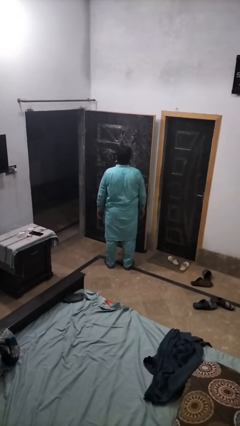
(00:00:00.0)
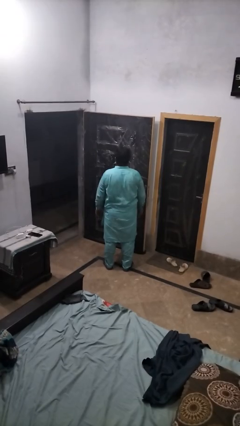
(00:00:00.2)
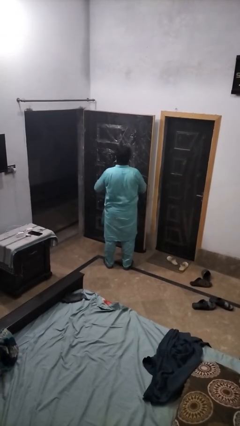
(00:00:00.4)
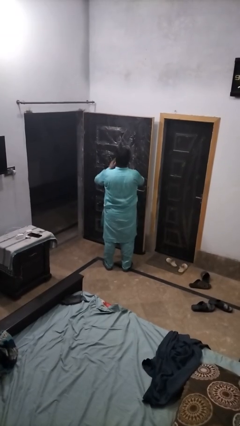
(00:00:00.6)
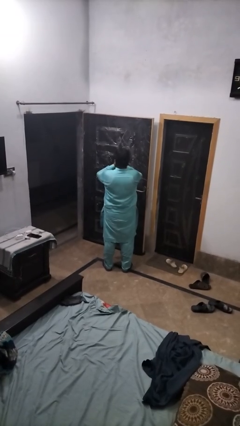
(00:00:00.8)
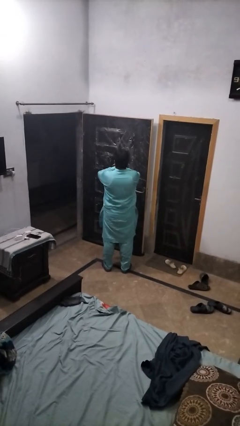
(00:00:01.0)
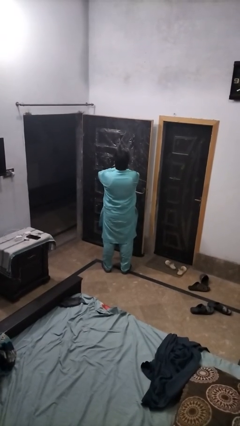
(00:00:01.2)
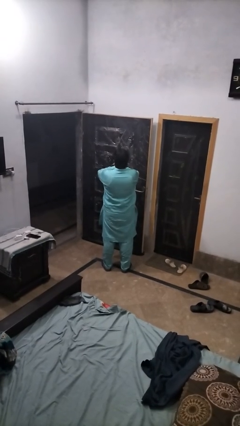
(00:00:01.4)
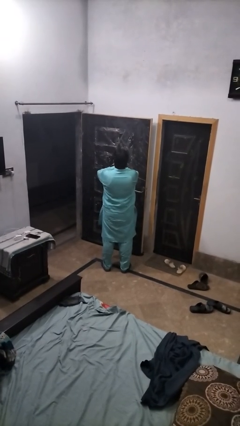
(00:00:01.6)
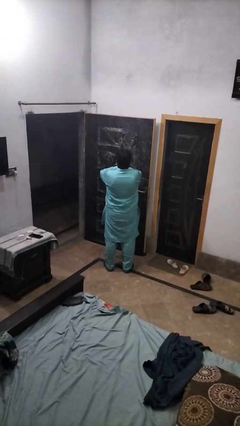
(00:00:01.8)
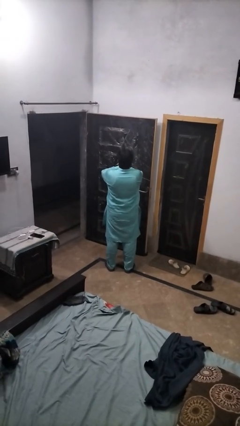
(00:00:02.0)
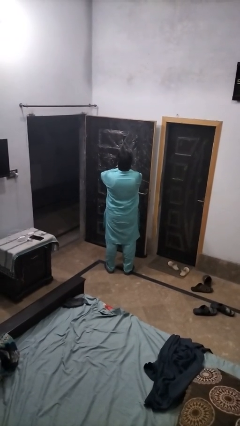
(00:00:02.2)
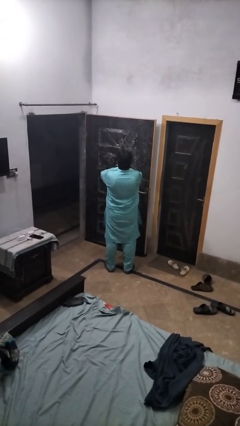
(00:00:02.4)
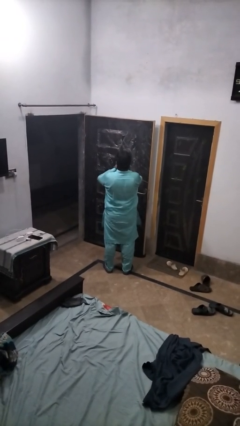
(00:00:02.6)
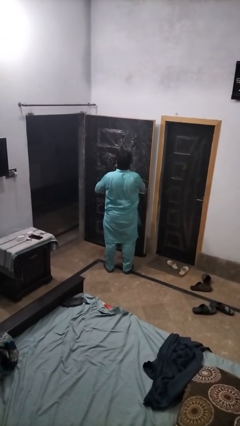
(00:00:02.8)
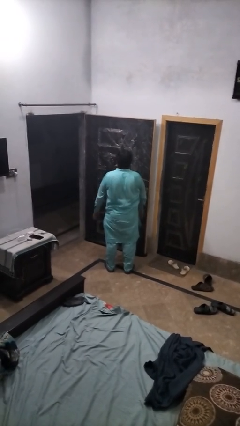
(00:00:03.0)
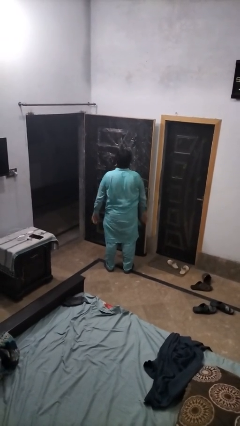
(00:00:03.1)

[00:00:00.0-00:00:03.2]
person yawns

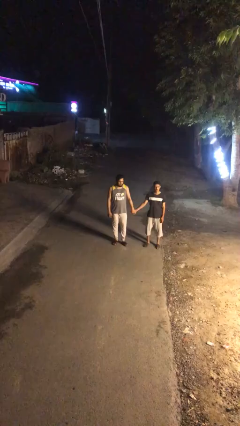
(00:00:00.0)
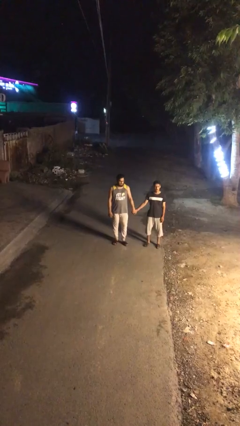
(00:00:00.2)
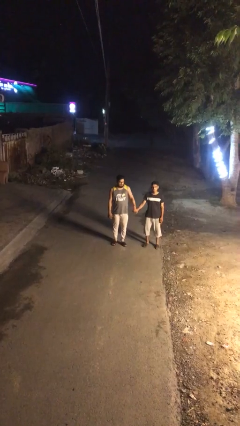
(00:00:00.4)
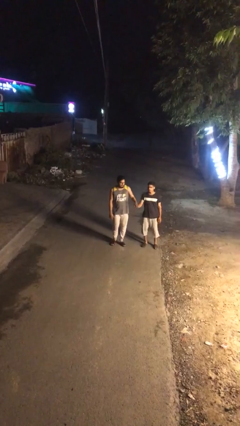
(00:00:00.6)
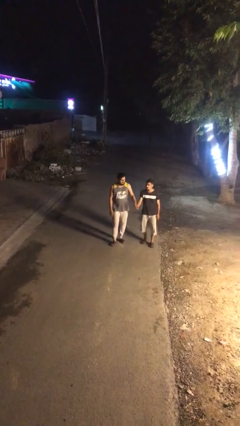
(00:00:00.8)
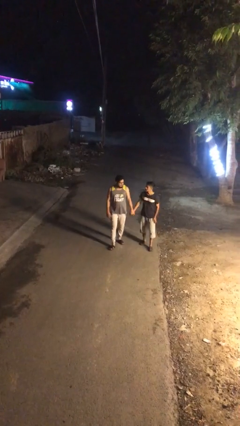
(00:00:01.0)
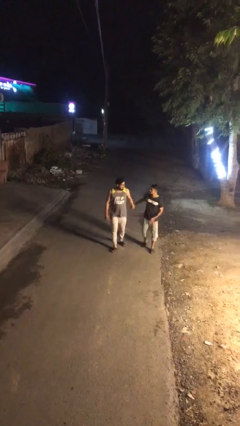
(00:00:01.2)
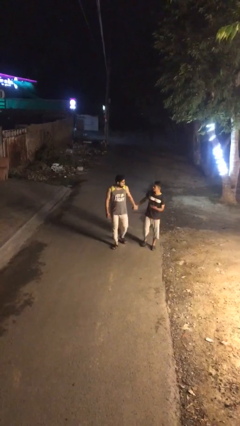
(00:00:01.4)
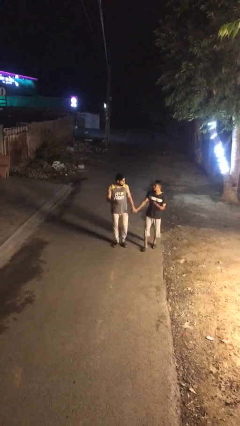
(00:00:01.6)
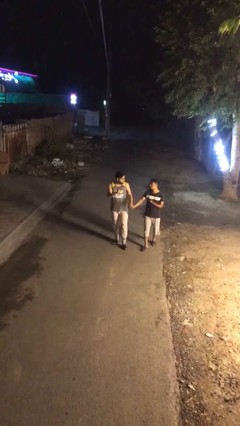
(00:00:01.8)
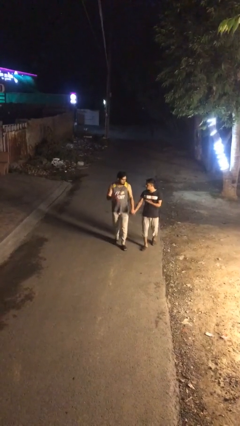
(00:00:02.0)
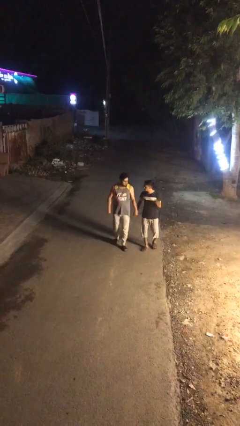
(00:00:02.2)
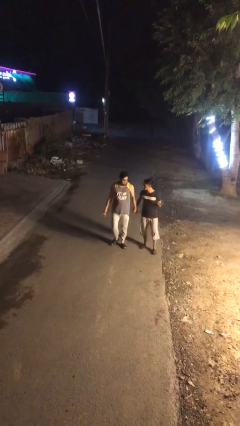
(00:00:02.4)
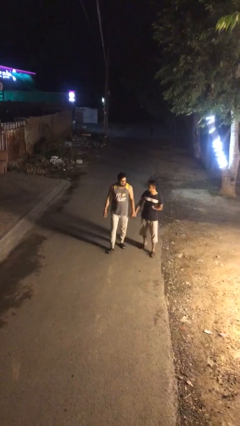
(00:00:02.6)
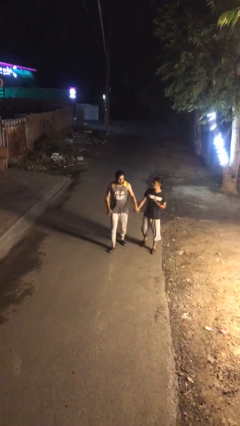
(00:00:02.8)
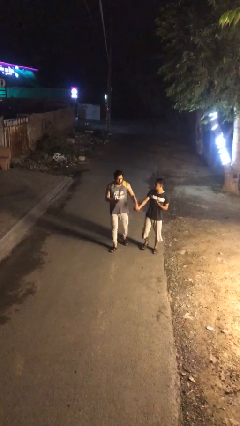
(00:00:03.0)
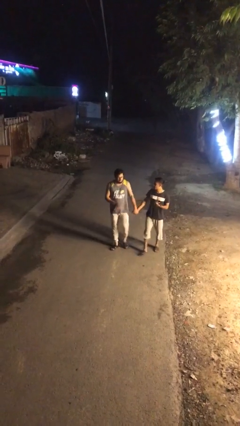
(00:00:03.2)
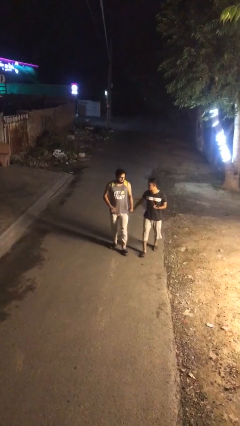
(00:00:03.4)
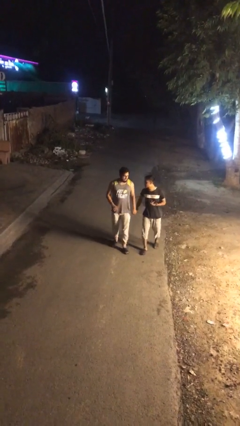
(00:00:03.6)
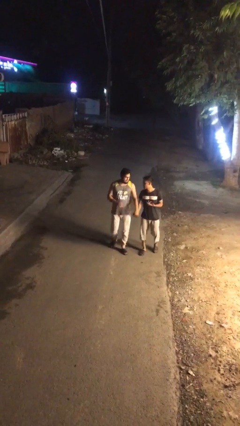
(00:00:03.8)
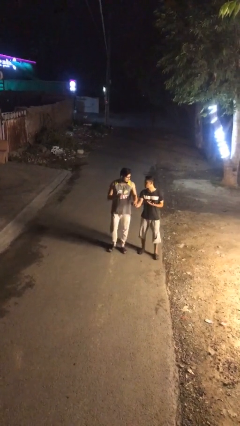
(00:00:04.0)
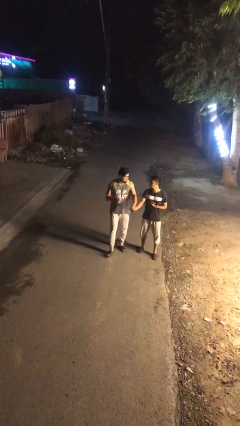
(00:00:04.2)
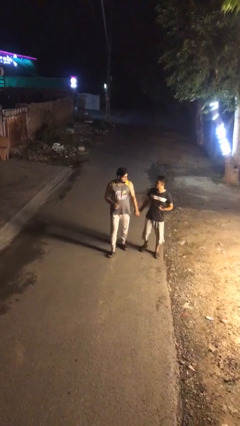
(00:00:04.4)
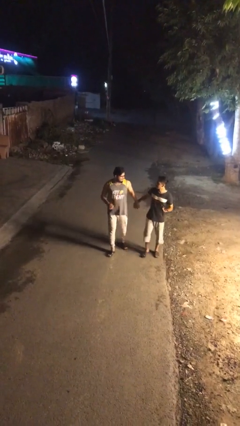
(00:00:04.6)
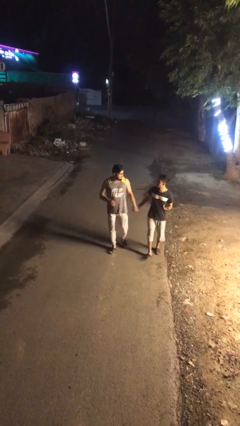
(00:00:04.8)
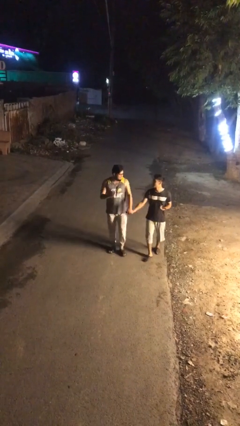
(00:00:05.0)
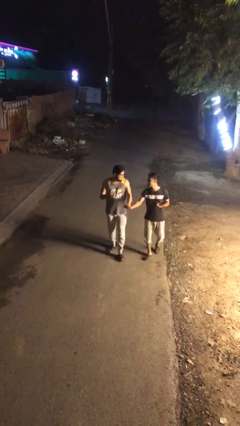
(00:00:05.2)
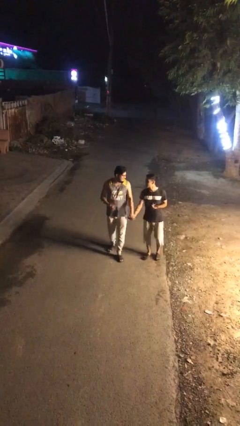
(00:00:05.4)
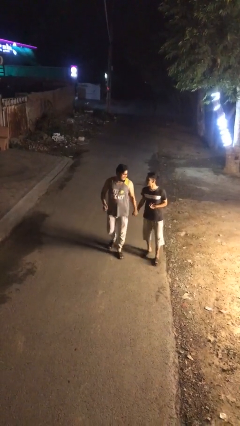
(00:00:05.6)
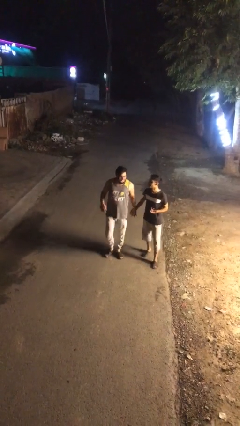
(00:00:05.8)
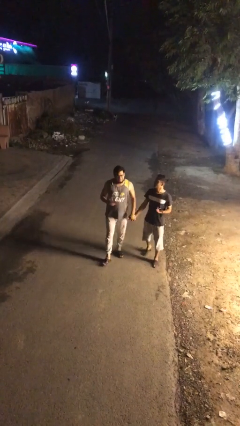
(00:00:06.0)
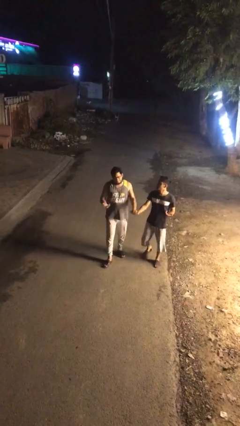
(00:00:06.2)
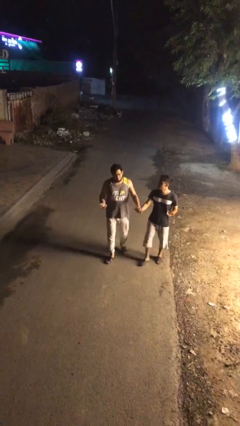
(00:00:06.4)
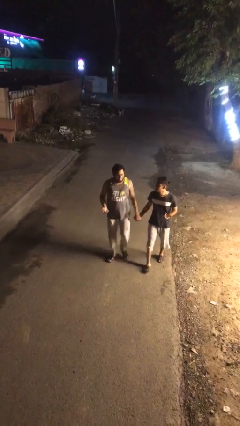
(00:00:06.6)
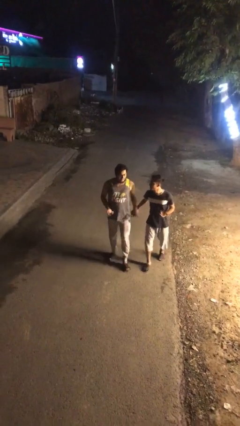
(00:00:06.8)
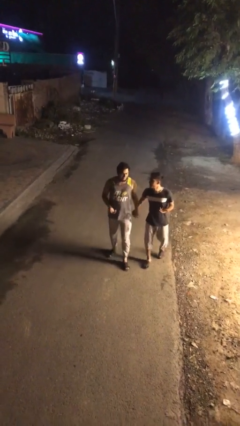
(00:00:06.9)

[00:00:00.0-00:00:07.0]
person holds hand

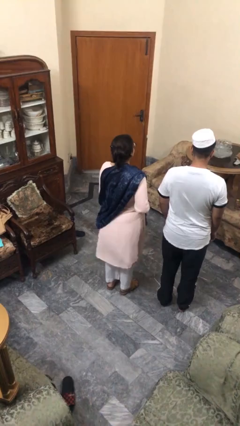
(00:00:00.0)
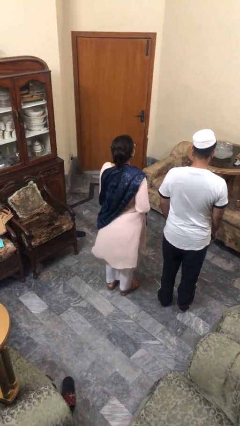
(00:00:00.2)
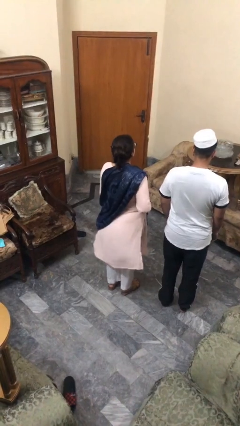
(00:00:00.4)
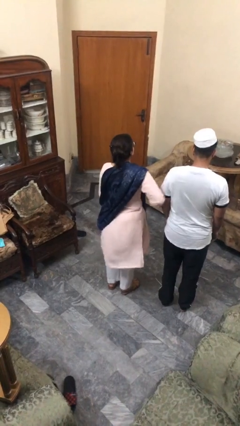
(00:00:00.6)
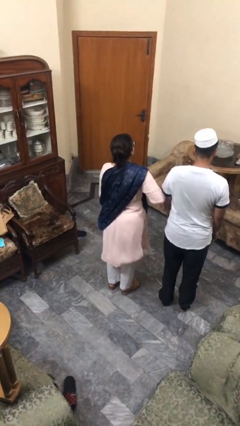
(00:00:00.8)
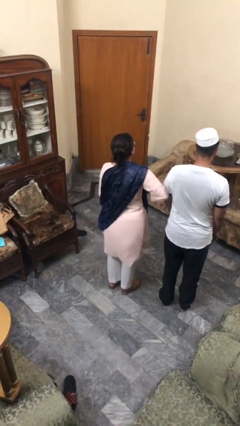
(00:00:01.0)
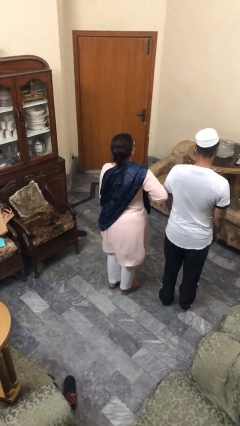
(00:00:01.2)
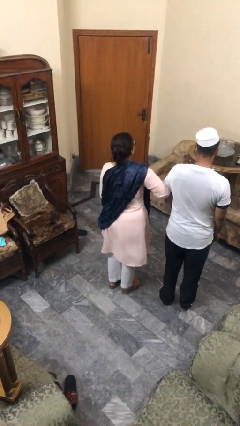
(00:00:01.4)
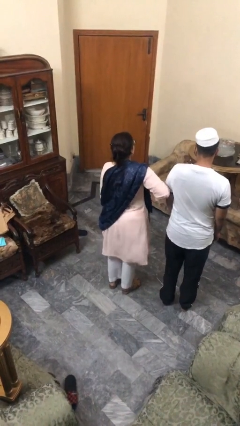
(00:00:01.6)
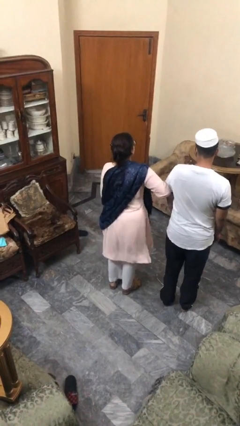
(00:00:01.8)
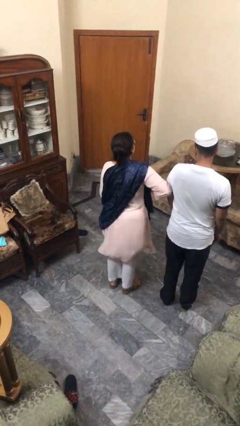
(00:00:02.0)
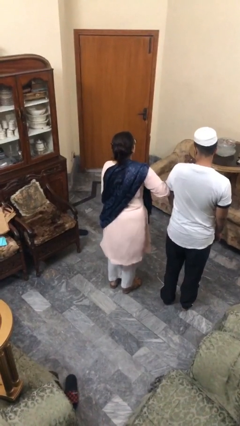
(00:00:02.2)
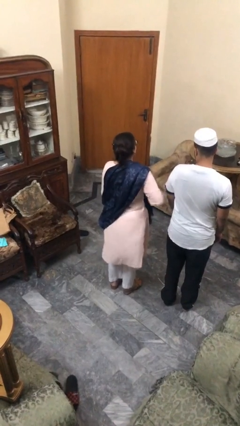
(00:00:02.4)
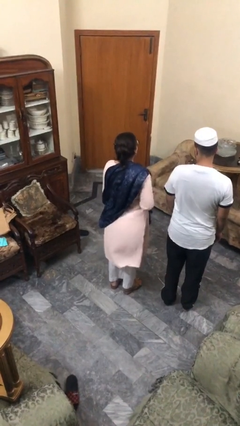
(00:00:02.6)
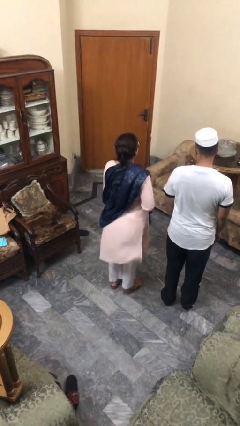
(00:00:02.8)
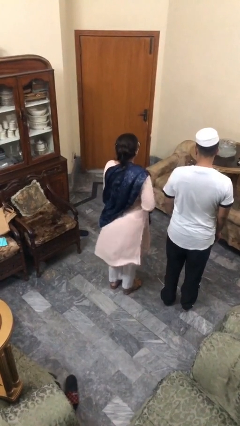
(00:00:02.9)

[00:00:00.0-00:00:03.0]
person nudges person with elbow

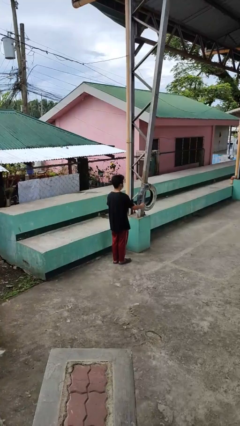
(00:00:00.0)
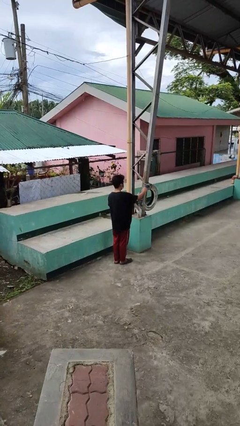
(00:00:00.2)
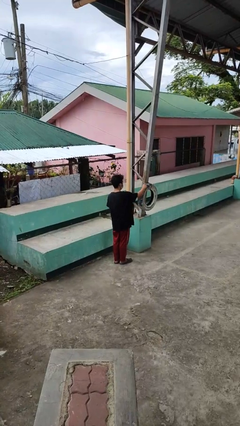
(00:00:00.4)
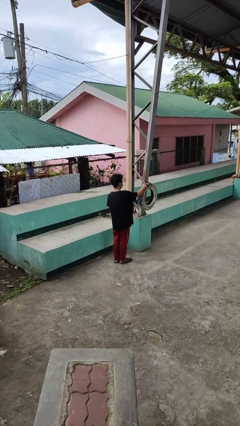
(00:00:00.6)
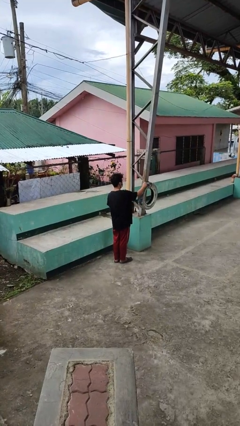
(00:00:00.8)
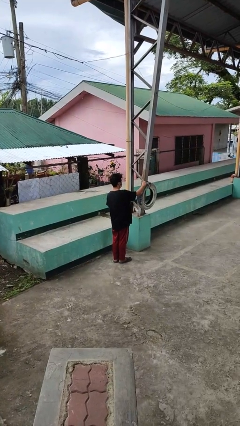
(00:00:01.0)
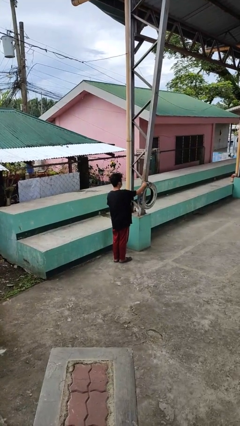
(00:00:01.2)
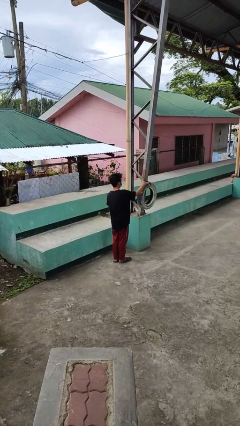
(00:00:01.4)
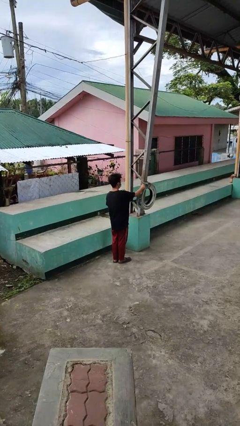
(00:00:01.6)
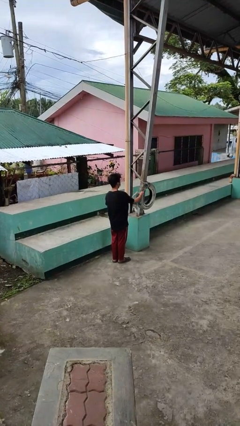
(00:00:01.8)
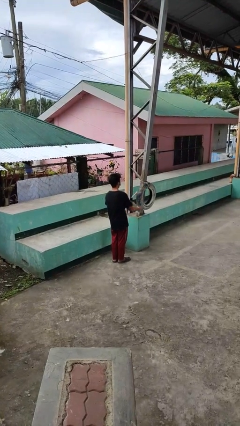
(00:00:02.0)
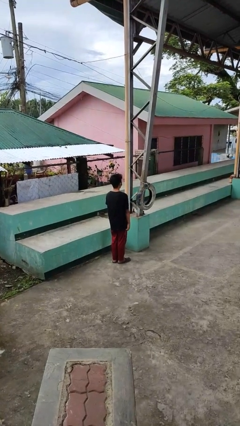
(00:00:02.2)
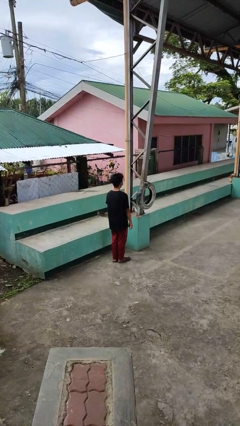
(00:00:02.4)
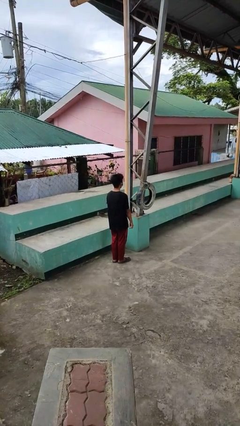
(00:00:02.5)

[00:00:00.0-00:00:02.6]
person taps object with finger

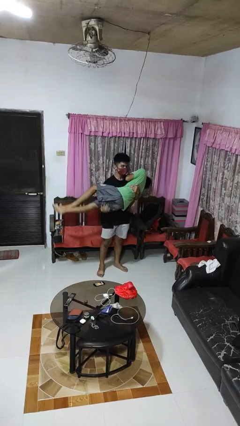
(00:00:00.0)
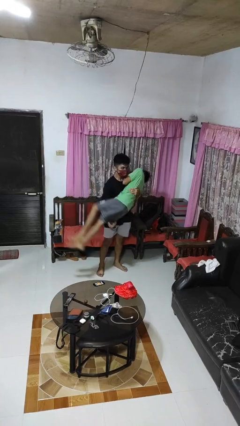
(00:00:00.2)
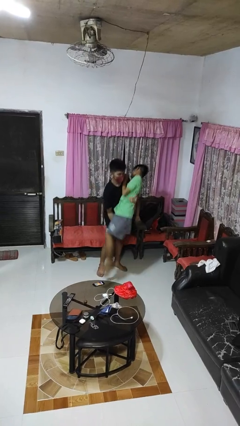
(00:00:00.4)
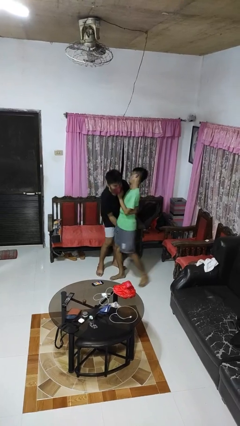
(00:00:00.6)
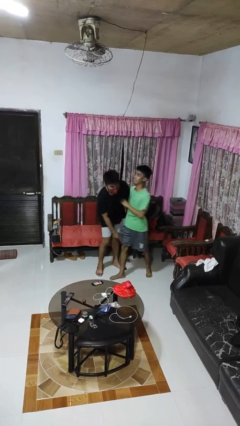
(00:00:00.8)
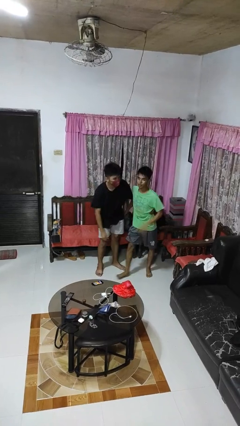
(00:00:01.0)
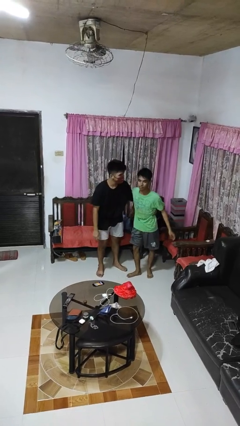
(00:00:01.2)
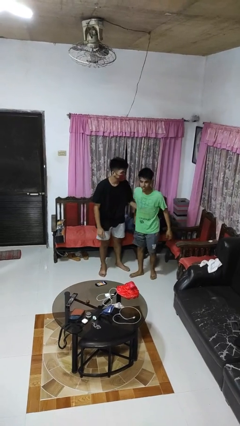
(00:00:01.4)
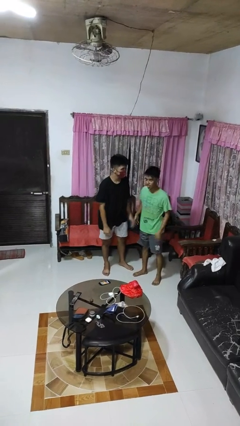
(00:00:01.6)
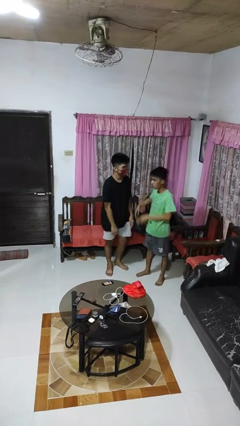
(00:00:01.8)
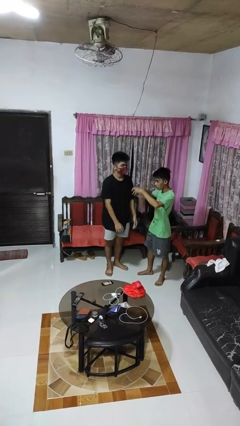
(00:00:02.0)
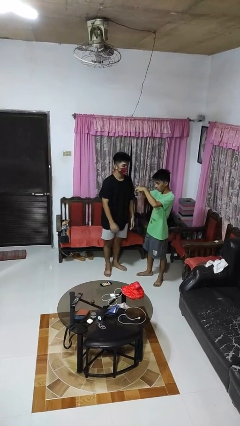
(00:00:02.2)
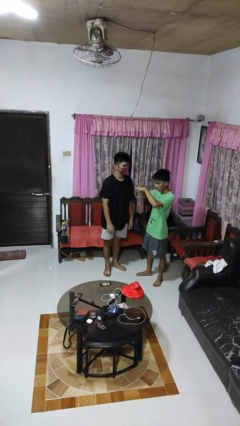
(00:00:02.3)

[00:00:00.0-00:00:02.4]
person puts down person
